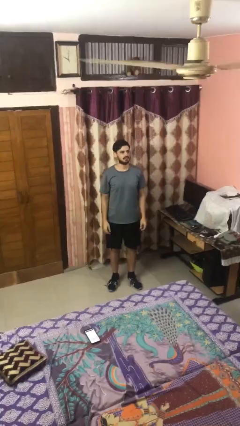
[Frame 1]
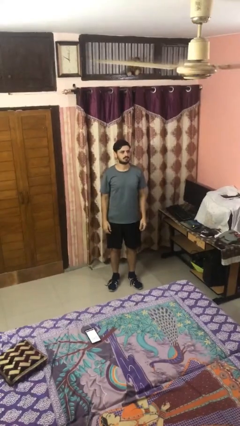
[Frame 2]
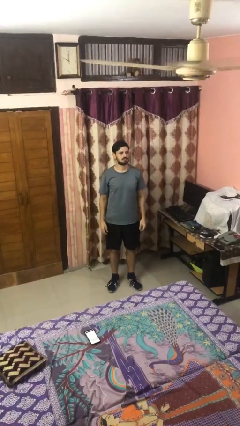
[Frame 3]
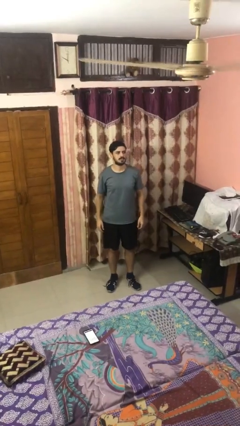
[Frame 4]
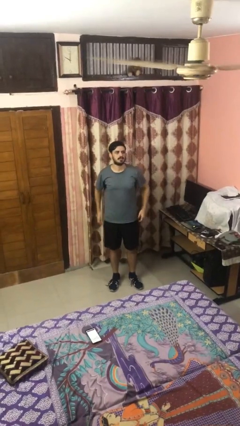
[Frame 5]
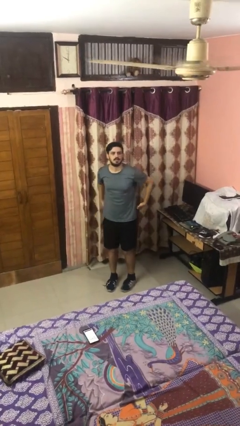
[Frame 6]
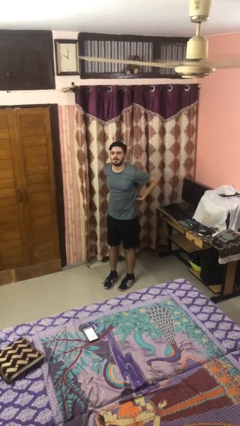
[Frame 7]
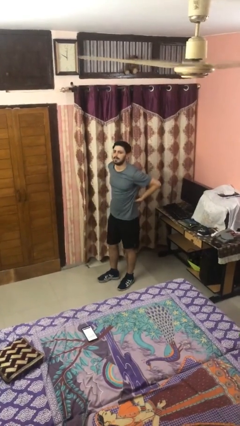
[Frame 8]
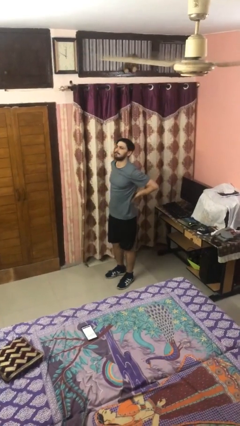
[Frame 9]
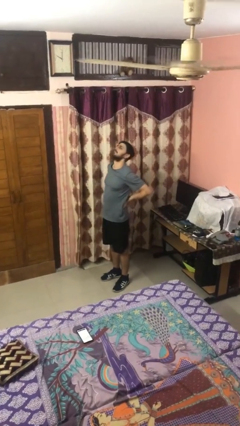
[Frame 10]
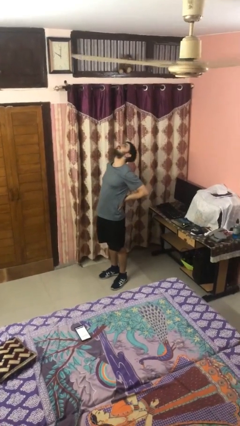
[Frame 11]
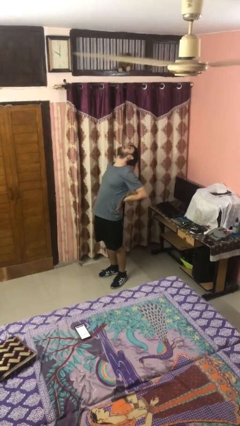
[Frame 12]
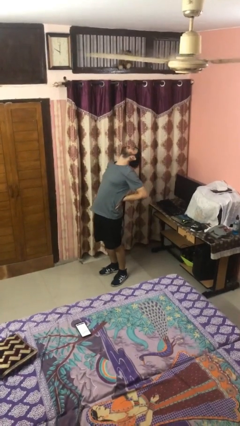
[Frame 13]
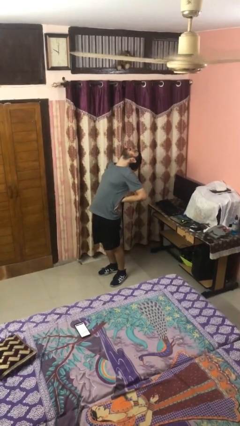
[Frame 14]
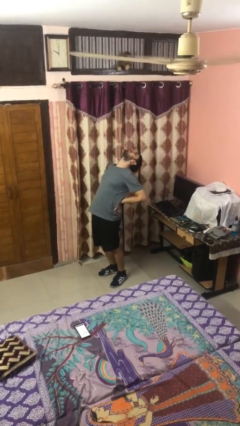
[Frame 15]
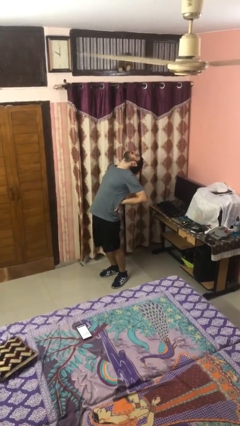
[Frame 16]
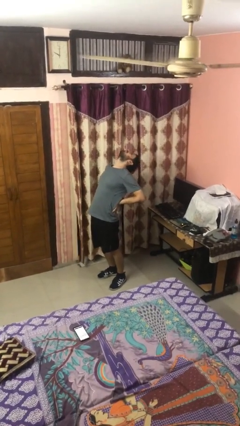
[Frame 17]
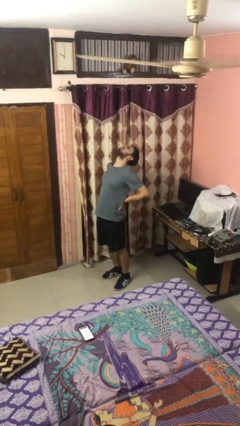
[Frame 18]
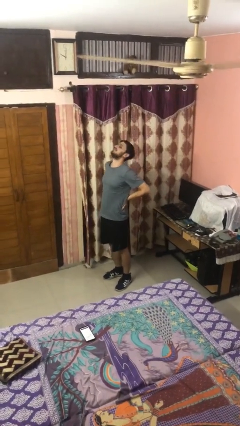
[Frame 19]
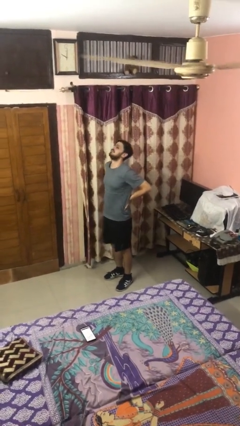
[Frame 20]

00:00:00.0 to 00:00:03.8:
person stretches back

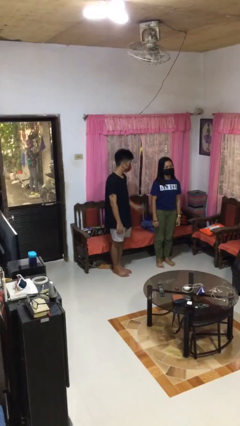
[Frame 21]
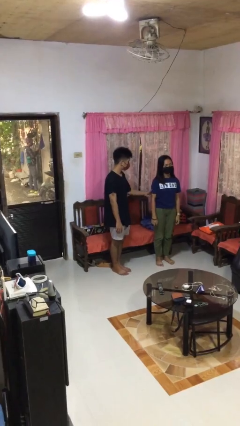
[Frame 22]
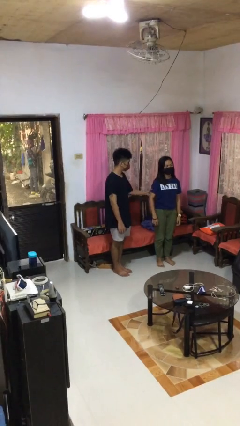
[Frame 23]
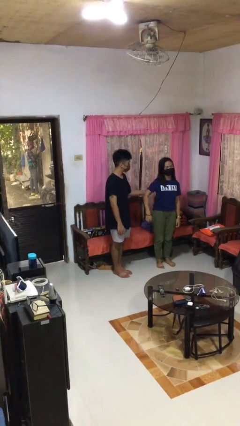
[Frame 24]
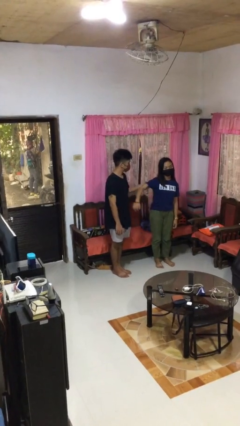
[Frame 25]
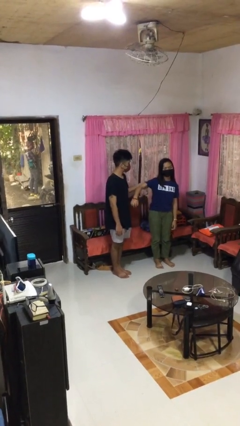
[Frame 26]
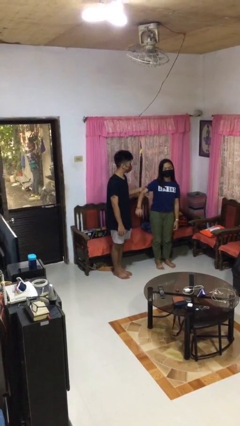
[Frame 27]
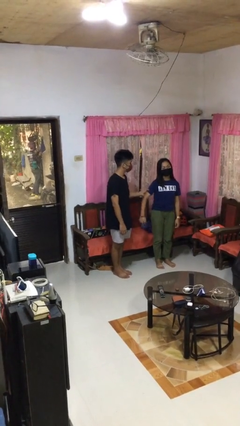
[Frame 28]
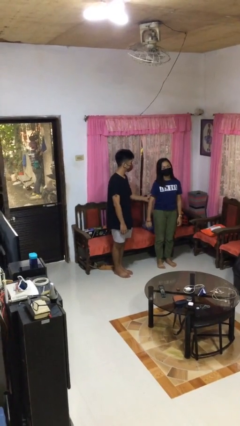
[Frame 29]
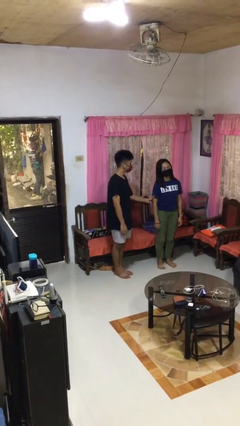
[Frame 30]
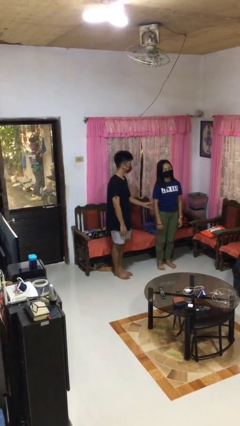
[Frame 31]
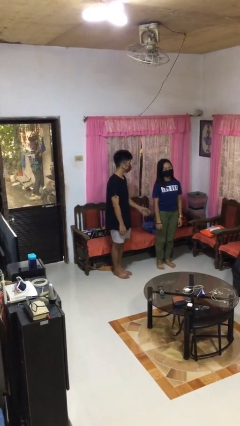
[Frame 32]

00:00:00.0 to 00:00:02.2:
person grabs person by bicep

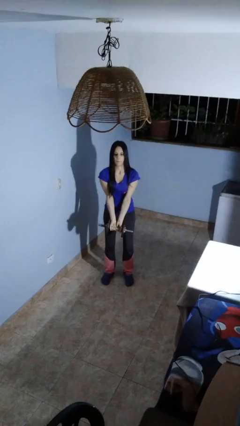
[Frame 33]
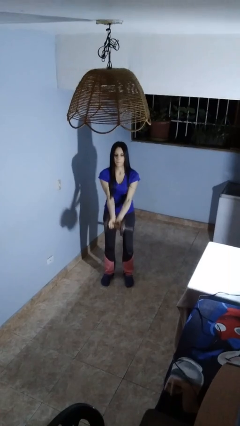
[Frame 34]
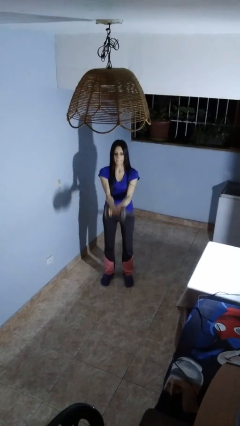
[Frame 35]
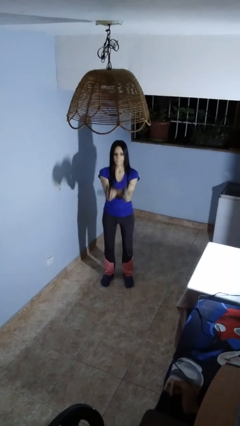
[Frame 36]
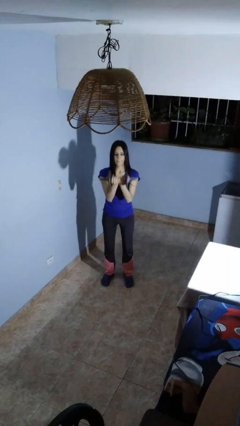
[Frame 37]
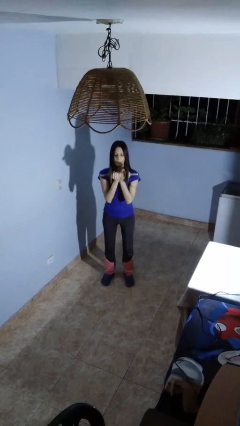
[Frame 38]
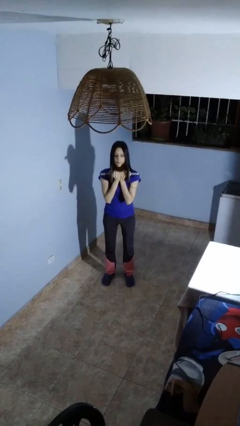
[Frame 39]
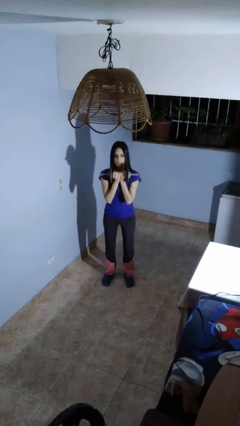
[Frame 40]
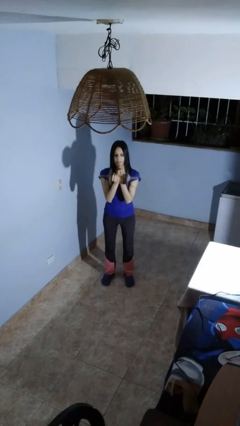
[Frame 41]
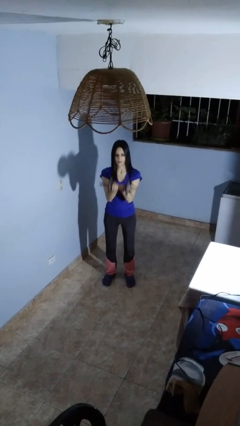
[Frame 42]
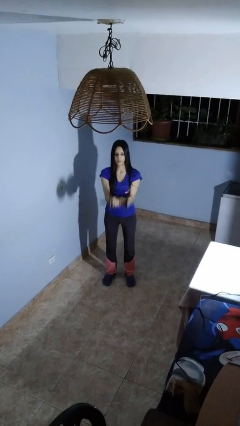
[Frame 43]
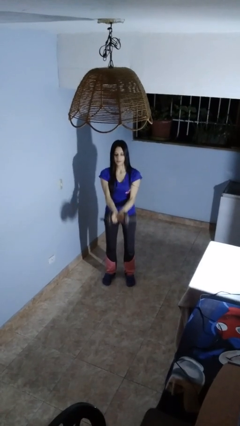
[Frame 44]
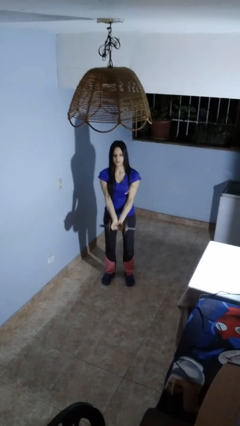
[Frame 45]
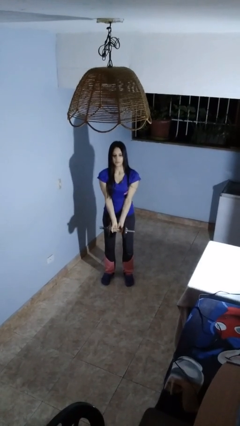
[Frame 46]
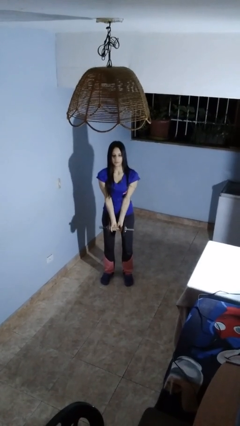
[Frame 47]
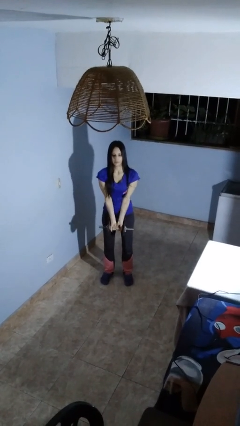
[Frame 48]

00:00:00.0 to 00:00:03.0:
person lifts dumbbells

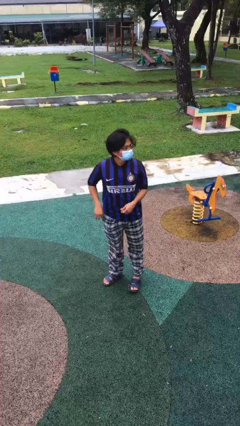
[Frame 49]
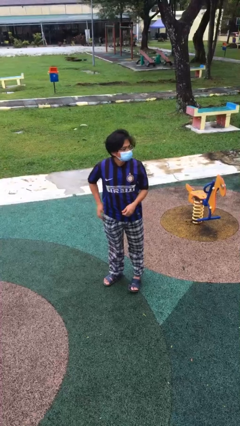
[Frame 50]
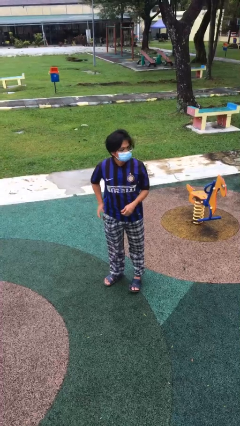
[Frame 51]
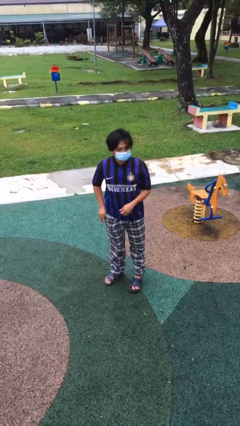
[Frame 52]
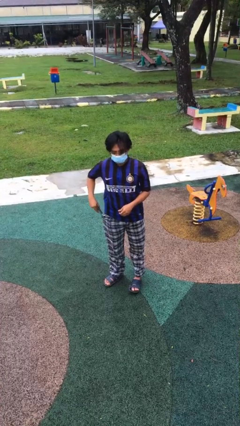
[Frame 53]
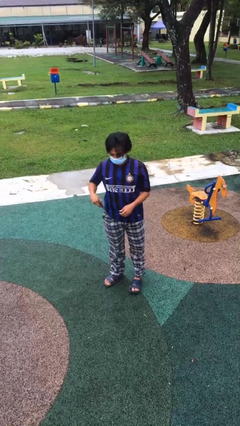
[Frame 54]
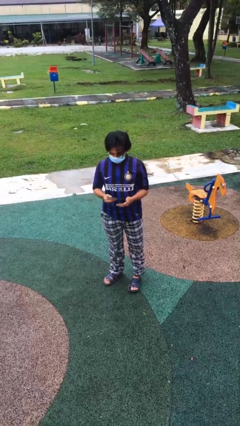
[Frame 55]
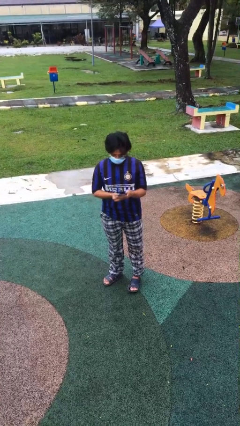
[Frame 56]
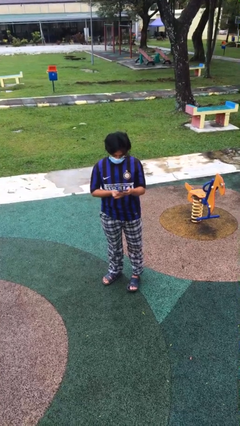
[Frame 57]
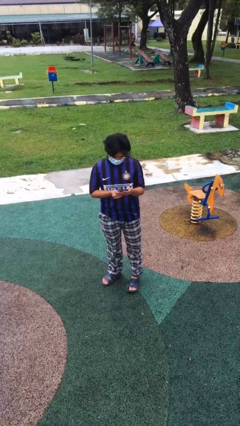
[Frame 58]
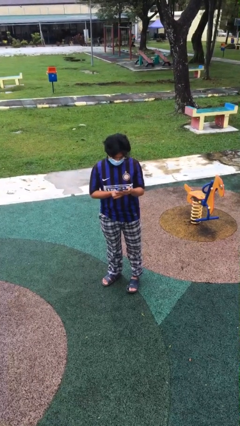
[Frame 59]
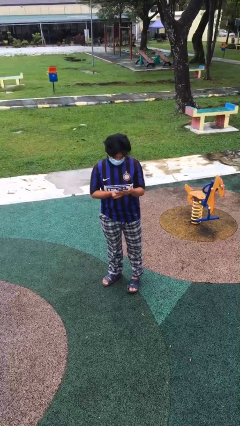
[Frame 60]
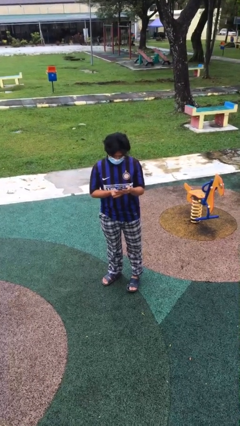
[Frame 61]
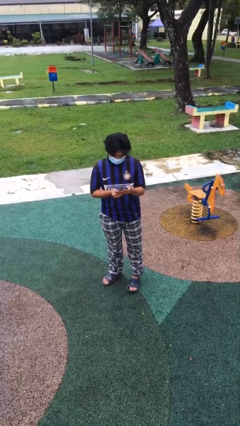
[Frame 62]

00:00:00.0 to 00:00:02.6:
person takes phone from pocket

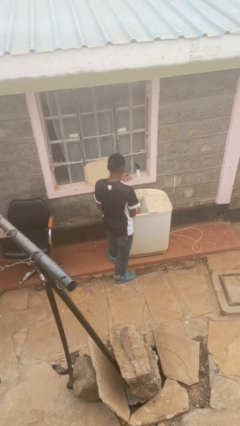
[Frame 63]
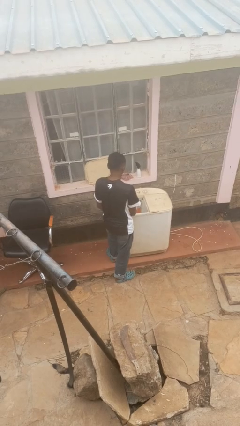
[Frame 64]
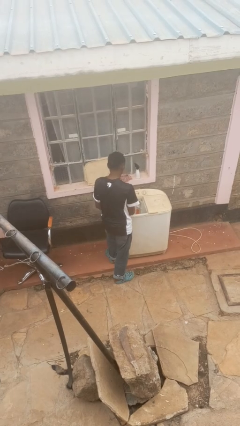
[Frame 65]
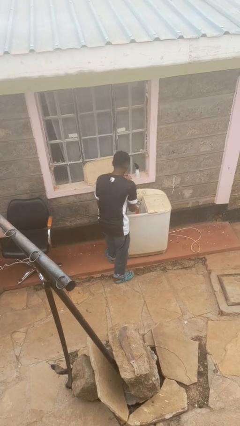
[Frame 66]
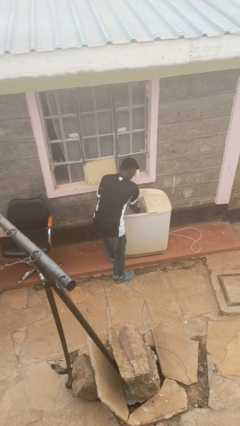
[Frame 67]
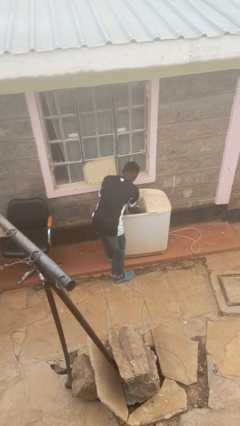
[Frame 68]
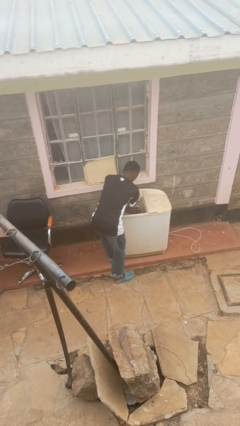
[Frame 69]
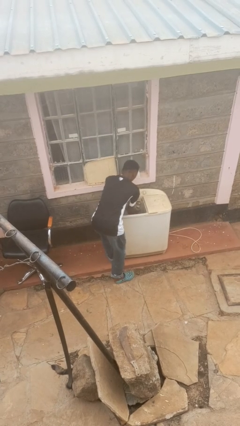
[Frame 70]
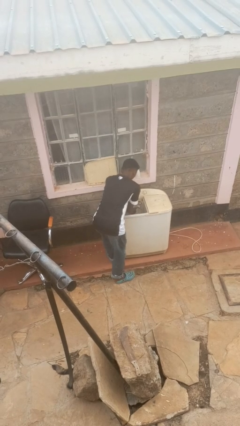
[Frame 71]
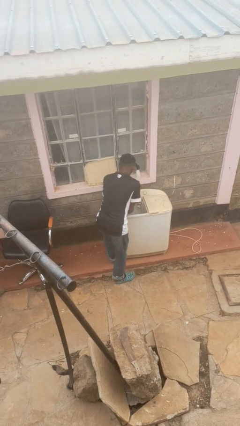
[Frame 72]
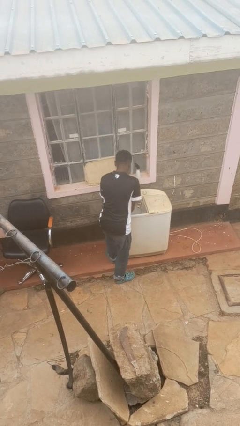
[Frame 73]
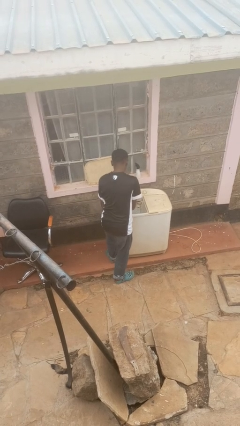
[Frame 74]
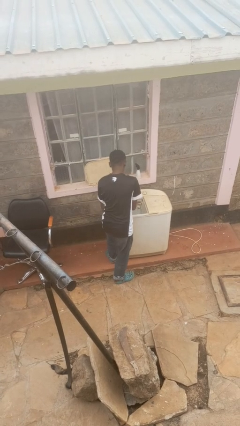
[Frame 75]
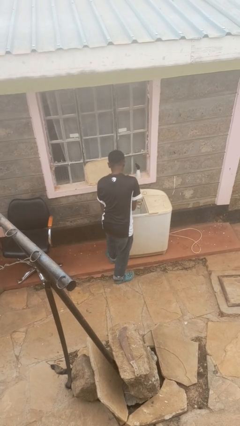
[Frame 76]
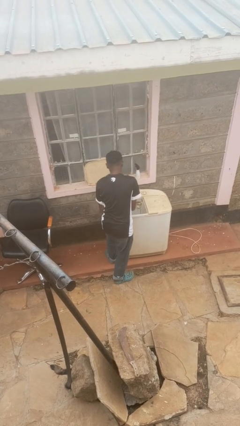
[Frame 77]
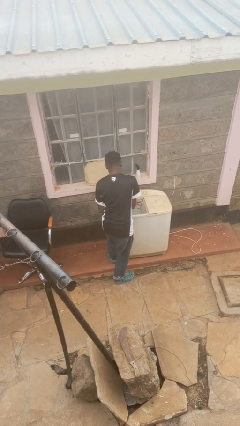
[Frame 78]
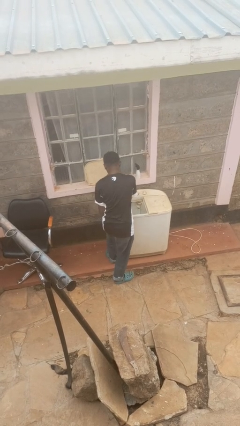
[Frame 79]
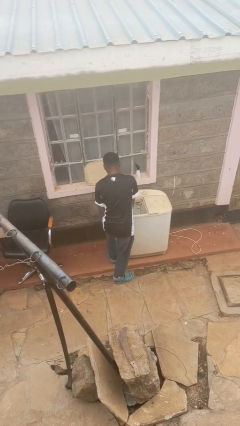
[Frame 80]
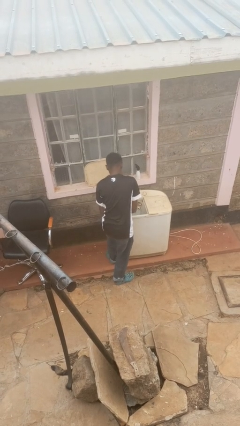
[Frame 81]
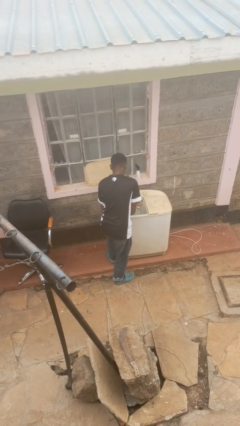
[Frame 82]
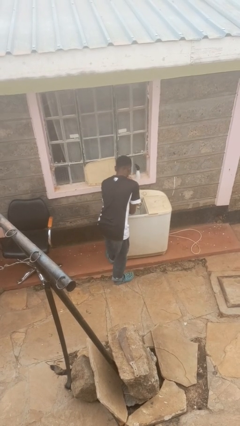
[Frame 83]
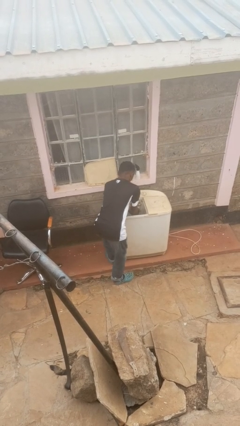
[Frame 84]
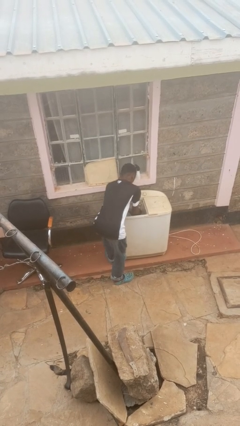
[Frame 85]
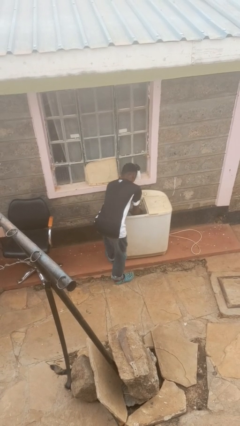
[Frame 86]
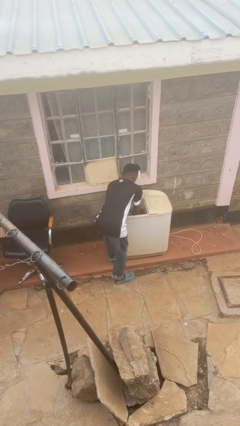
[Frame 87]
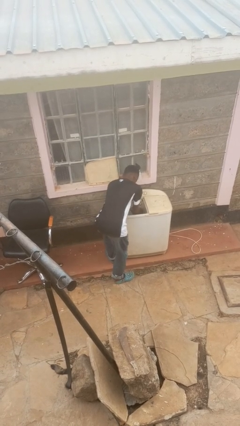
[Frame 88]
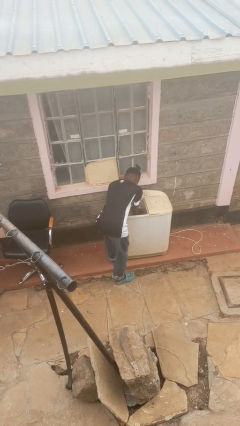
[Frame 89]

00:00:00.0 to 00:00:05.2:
person cleans dryer lint trap

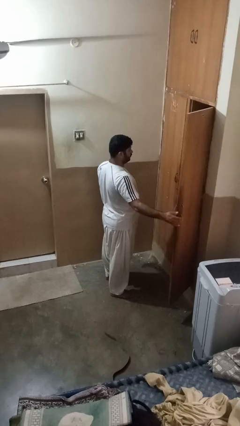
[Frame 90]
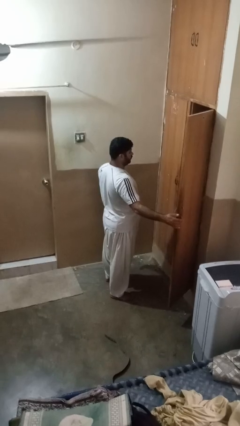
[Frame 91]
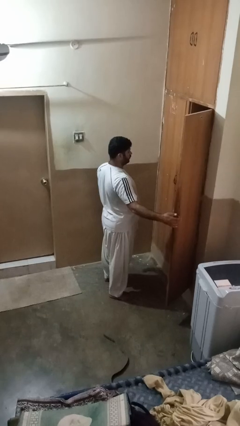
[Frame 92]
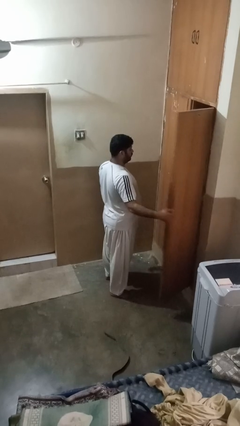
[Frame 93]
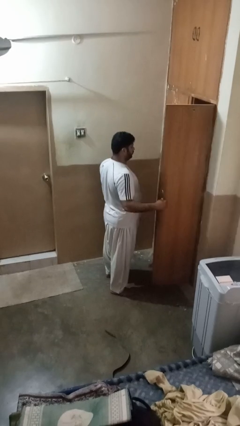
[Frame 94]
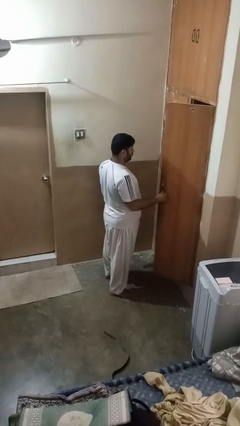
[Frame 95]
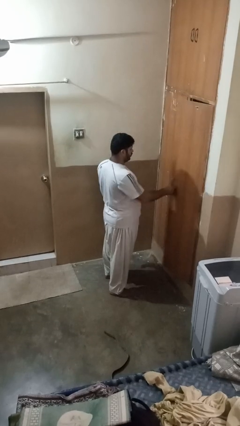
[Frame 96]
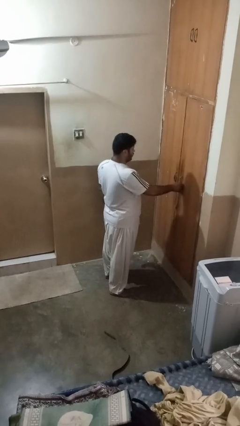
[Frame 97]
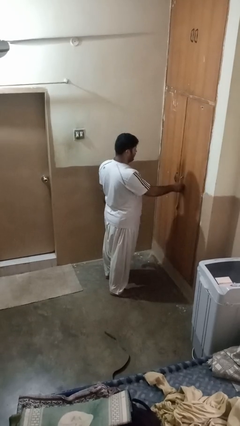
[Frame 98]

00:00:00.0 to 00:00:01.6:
person closes closet door